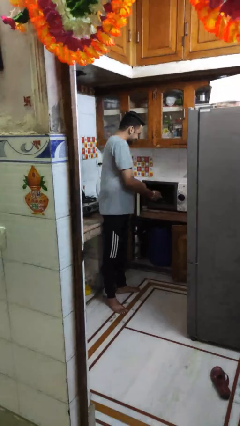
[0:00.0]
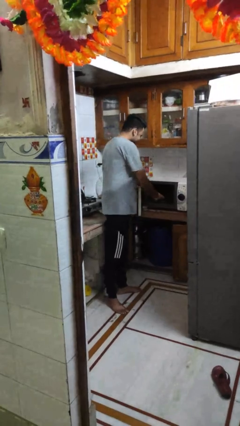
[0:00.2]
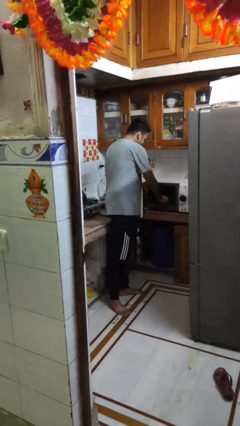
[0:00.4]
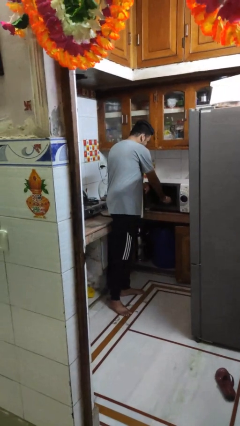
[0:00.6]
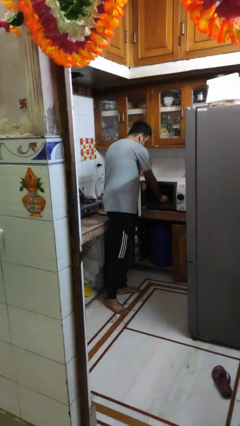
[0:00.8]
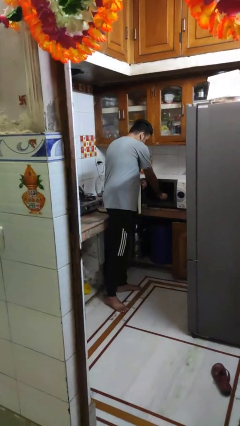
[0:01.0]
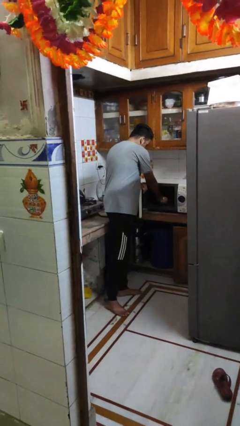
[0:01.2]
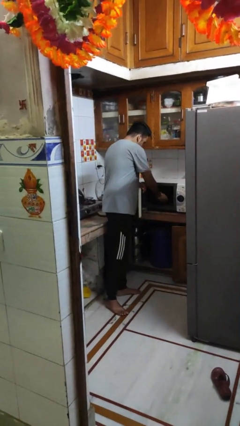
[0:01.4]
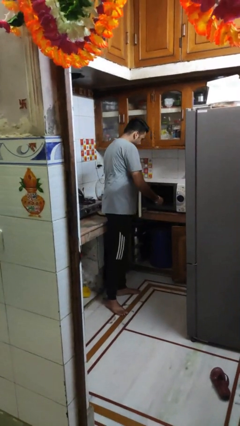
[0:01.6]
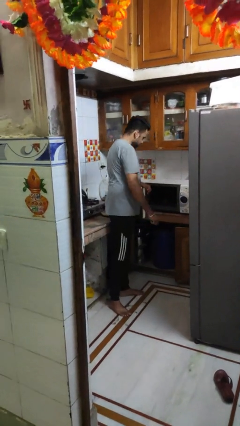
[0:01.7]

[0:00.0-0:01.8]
person puts object into microwave

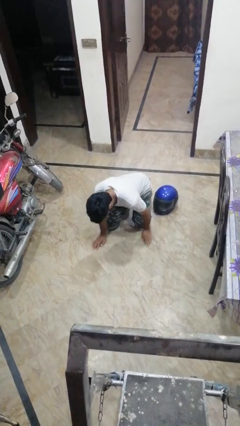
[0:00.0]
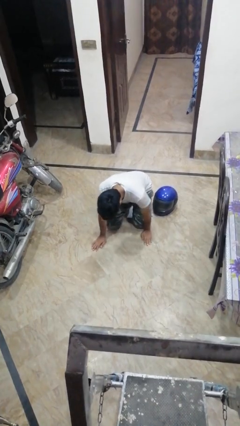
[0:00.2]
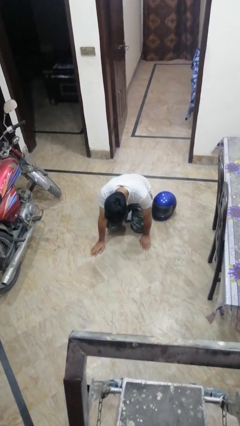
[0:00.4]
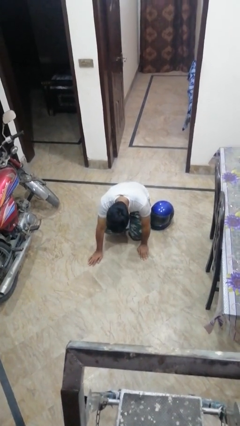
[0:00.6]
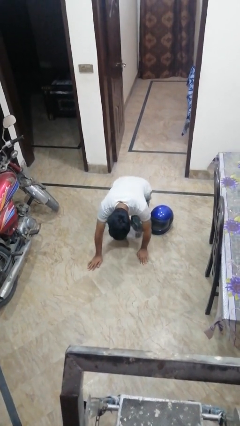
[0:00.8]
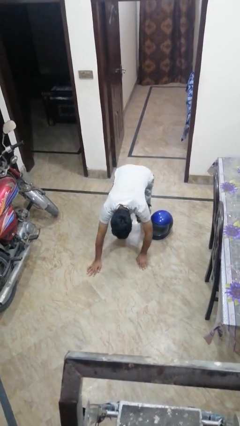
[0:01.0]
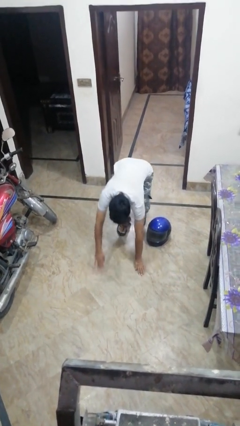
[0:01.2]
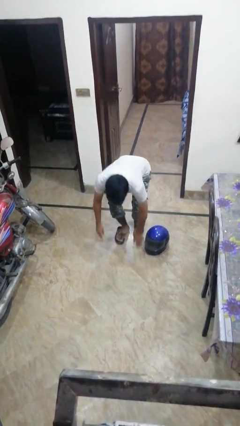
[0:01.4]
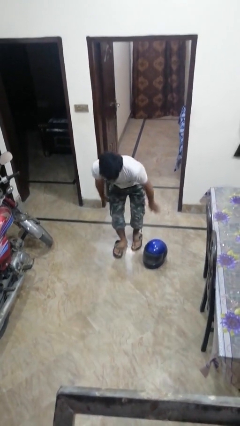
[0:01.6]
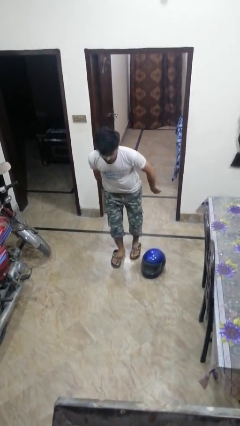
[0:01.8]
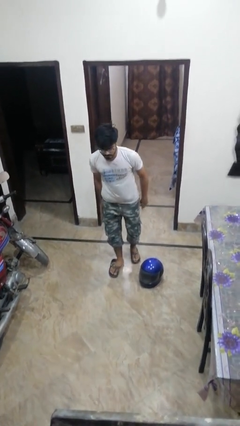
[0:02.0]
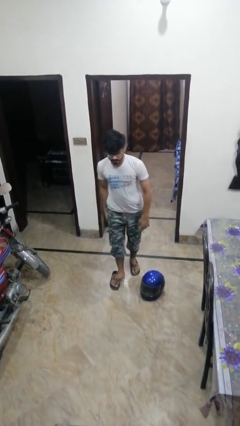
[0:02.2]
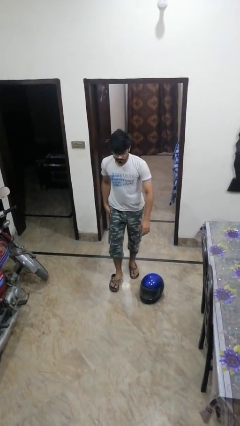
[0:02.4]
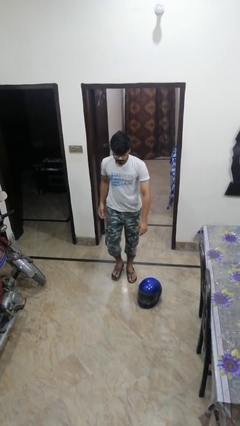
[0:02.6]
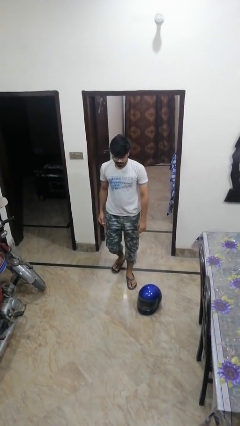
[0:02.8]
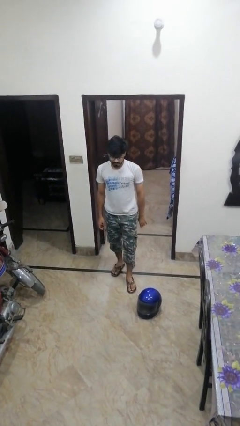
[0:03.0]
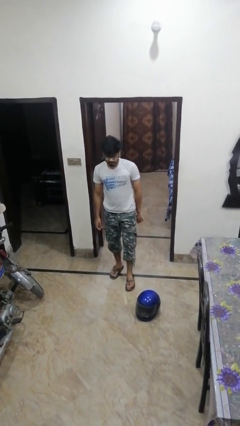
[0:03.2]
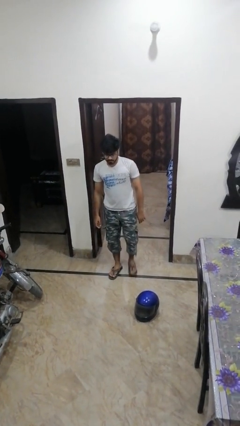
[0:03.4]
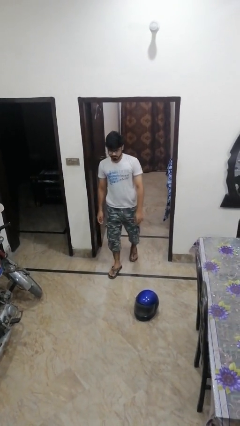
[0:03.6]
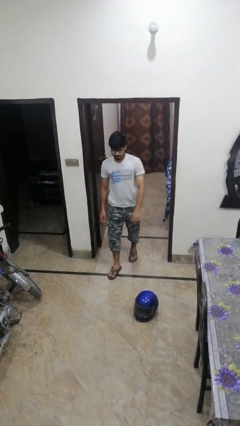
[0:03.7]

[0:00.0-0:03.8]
person stands up from floor

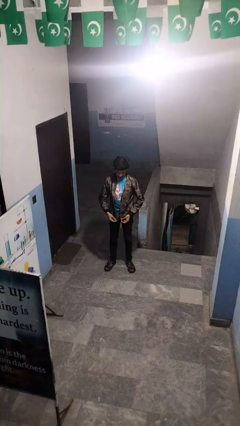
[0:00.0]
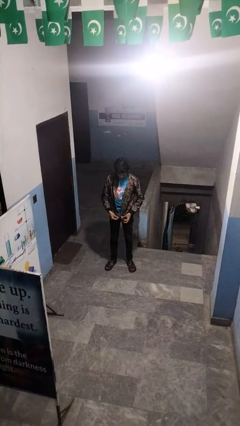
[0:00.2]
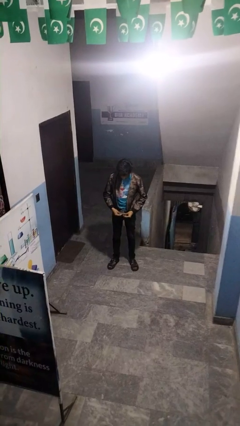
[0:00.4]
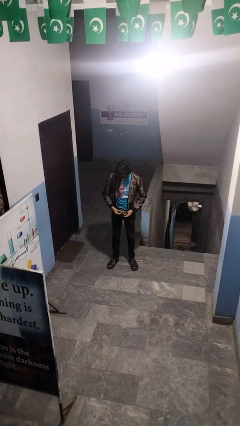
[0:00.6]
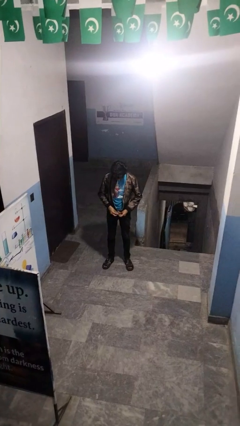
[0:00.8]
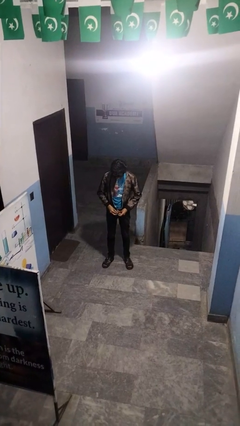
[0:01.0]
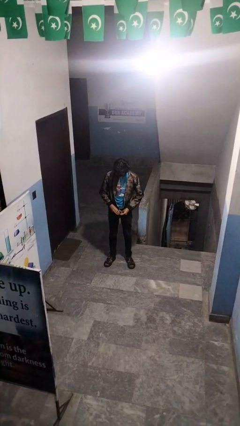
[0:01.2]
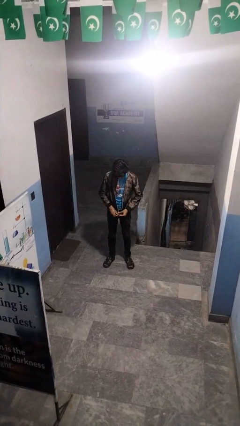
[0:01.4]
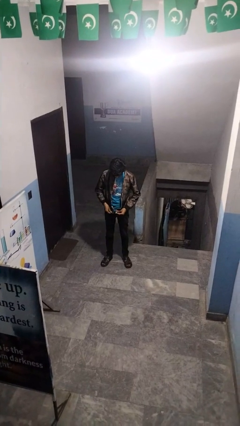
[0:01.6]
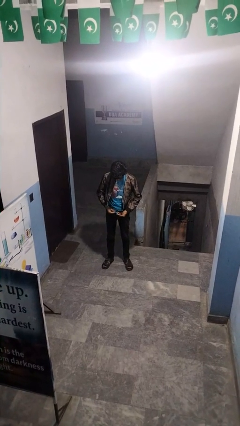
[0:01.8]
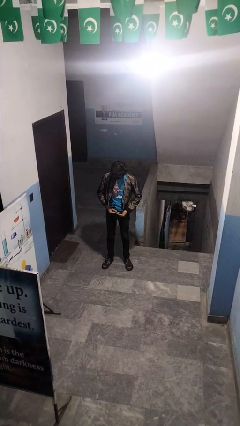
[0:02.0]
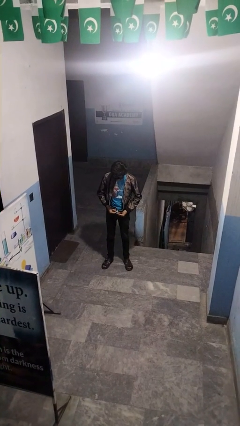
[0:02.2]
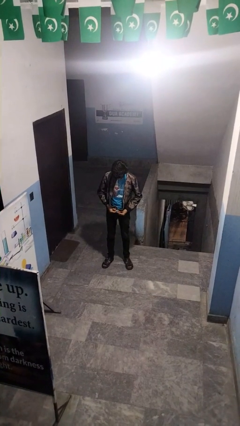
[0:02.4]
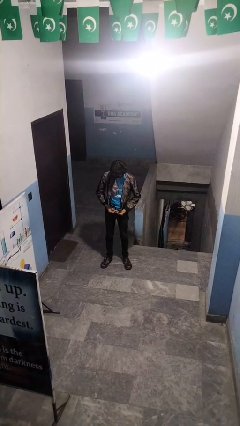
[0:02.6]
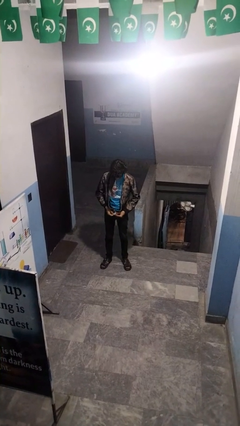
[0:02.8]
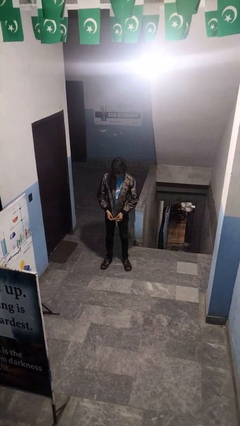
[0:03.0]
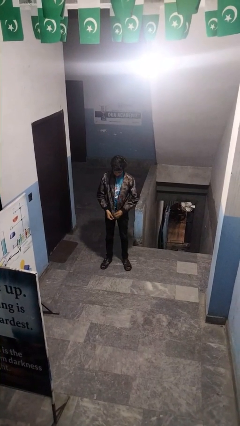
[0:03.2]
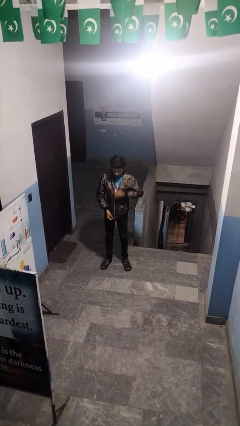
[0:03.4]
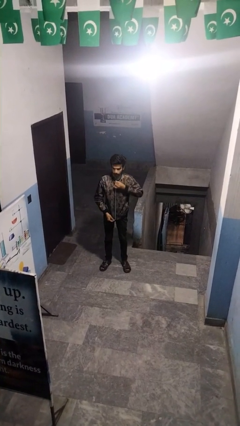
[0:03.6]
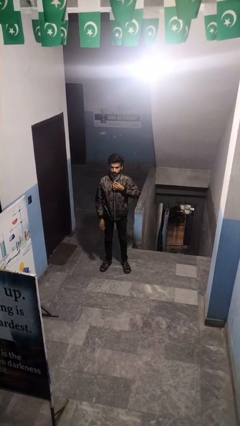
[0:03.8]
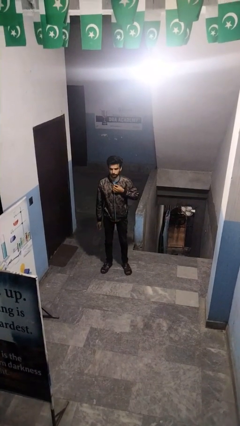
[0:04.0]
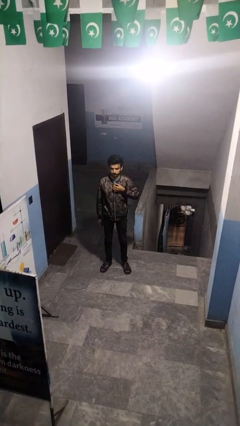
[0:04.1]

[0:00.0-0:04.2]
person zips up jacket

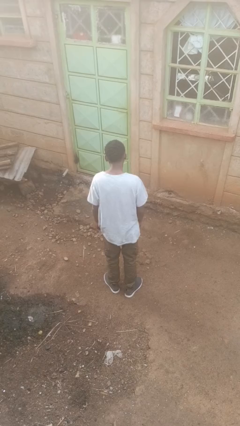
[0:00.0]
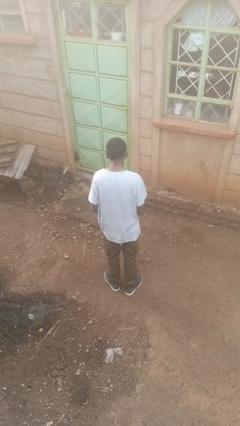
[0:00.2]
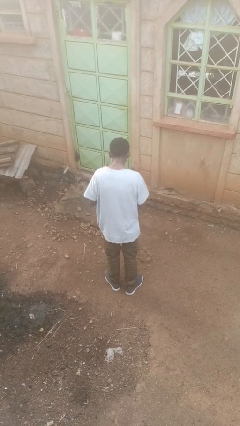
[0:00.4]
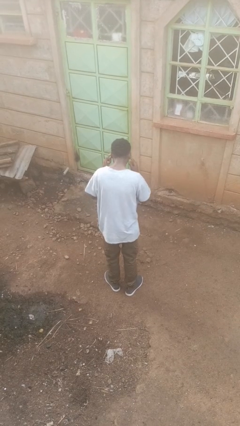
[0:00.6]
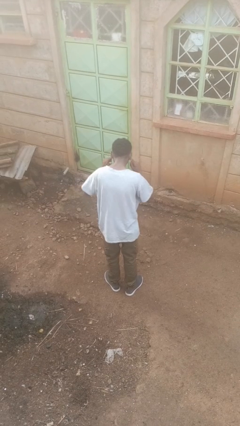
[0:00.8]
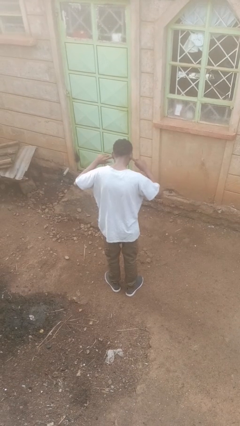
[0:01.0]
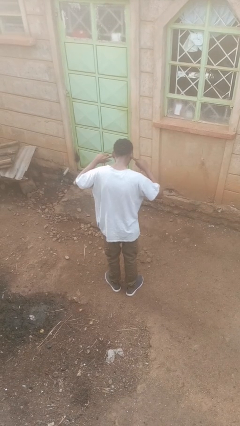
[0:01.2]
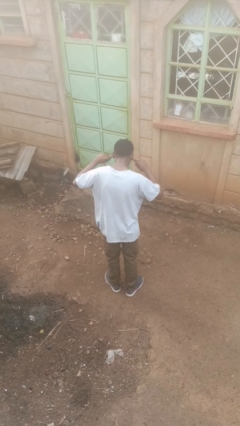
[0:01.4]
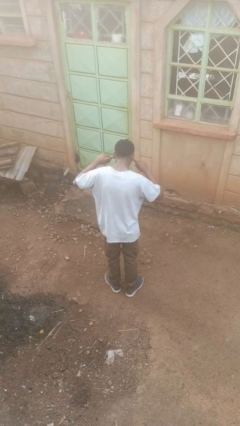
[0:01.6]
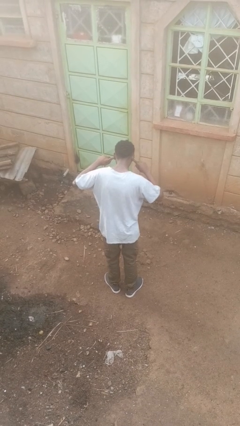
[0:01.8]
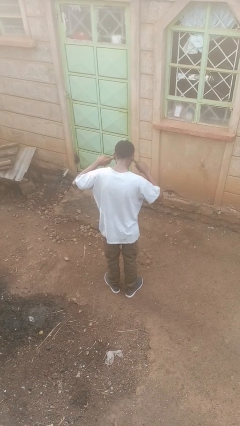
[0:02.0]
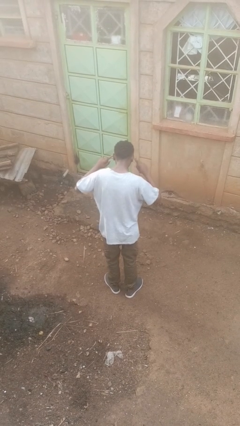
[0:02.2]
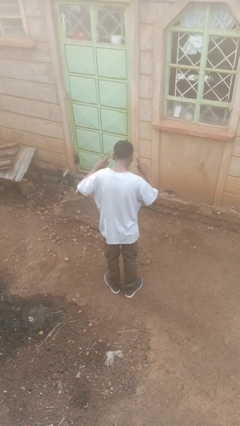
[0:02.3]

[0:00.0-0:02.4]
person puts fingers in ear

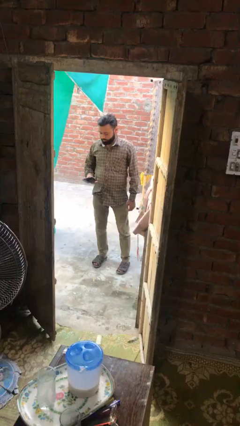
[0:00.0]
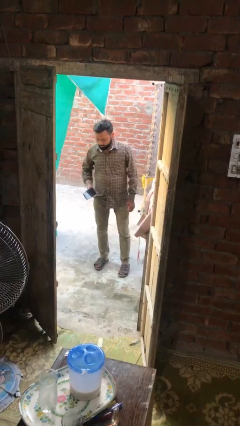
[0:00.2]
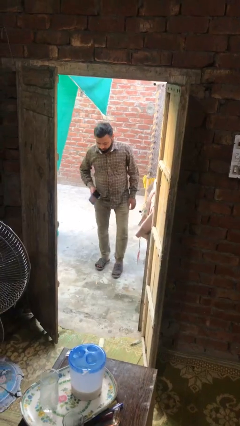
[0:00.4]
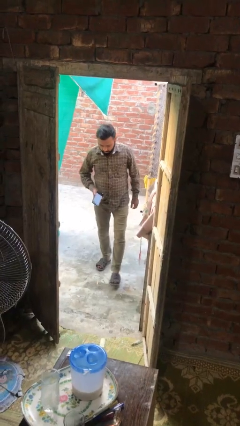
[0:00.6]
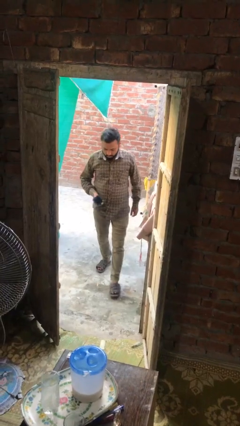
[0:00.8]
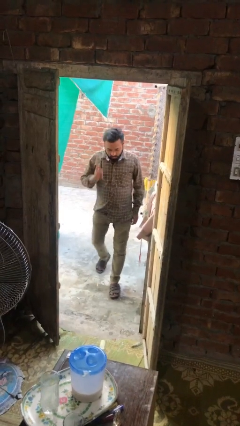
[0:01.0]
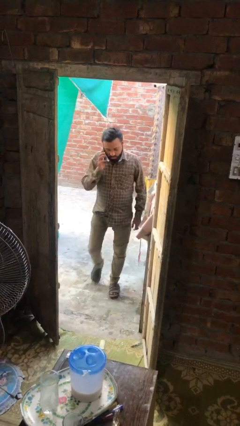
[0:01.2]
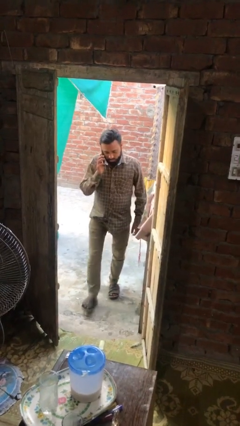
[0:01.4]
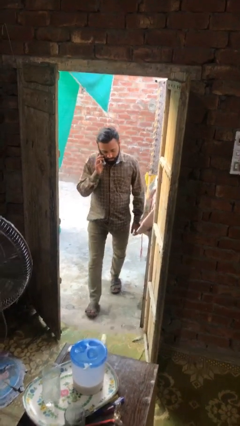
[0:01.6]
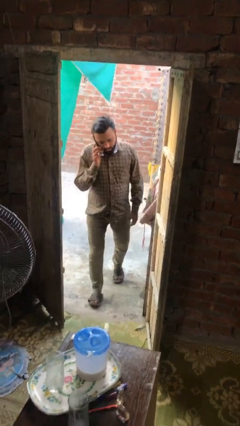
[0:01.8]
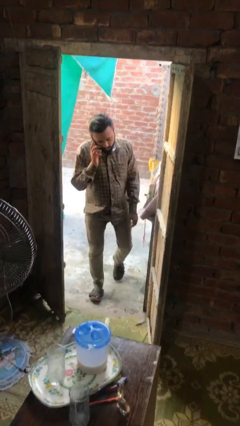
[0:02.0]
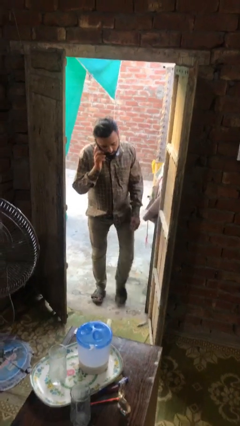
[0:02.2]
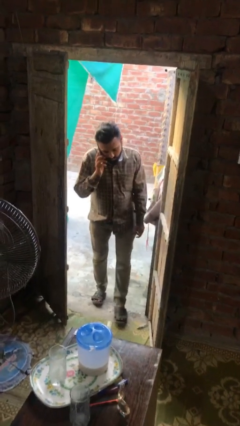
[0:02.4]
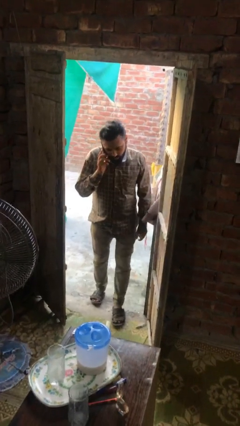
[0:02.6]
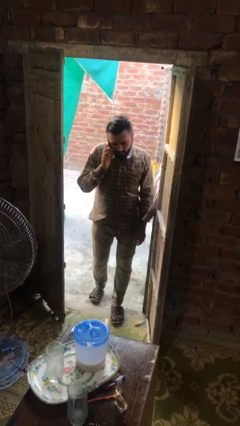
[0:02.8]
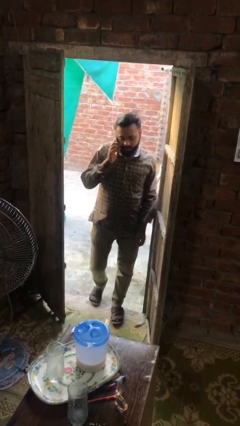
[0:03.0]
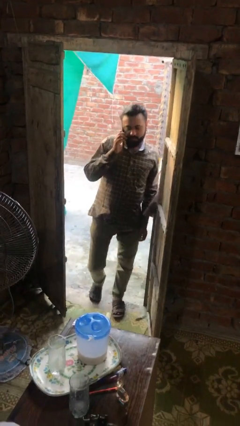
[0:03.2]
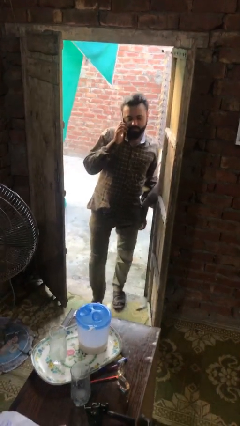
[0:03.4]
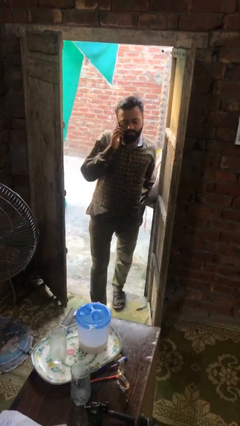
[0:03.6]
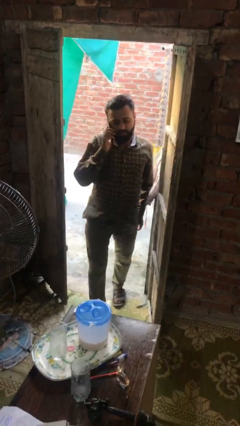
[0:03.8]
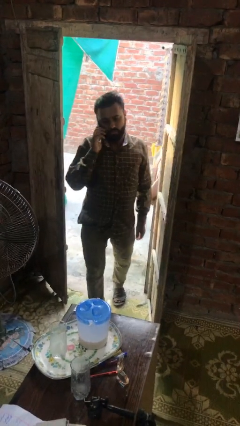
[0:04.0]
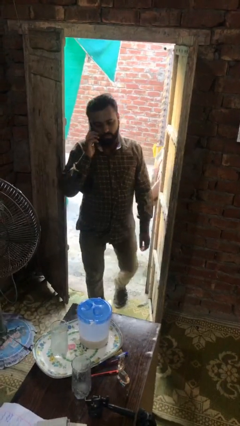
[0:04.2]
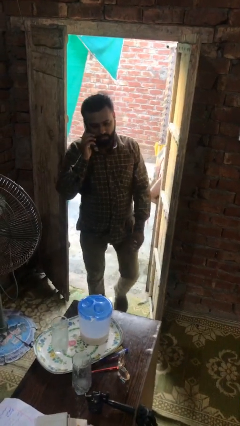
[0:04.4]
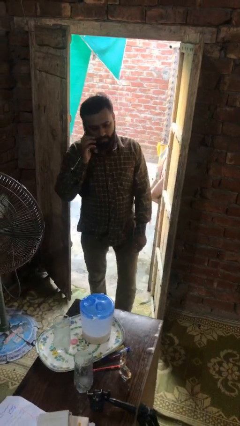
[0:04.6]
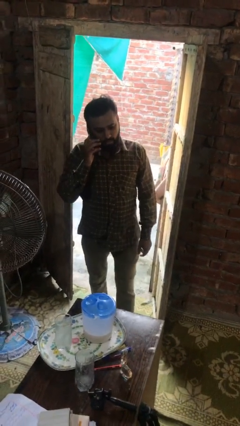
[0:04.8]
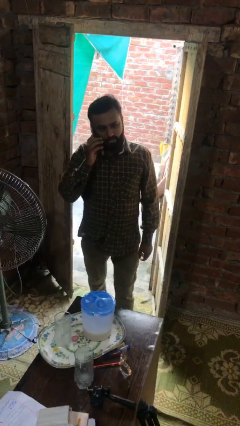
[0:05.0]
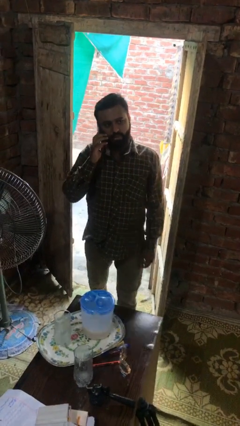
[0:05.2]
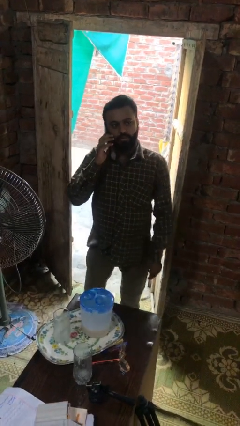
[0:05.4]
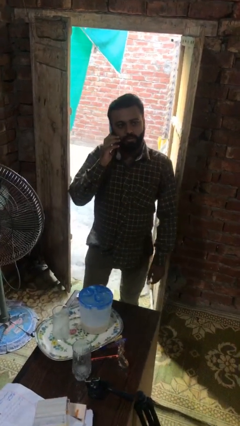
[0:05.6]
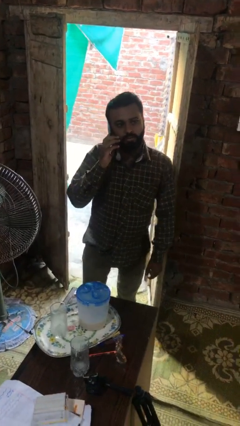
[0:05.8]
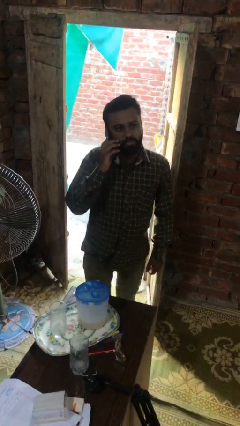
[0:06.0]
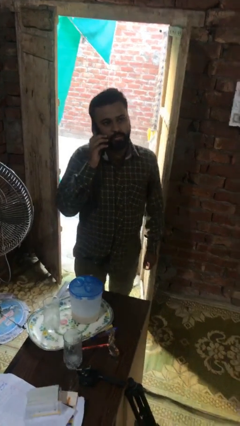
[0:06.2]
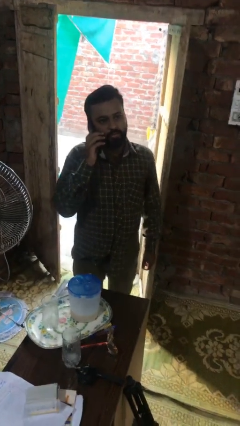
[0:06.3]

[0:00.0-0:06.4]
person enters scene through structure
